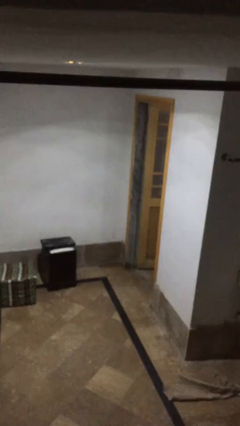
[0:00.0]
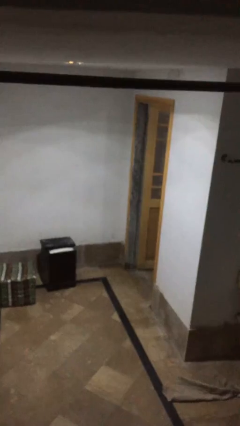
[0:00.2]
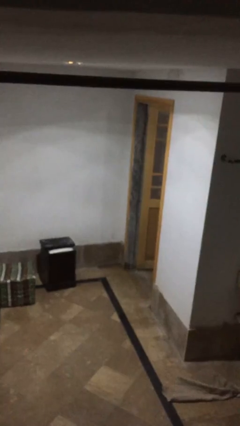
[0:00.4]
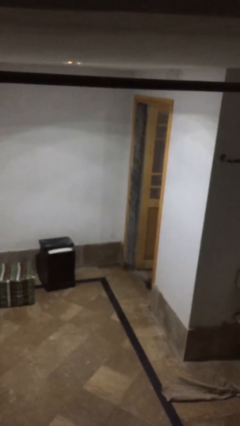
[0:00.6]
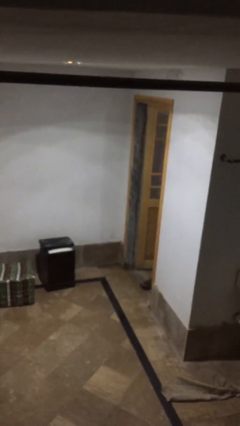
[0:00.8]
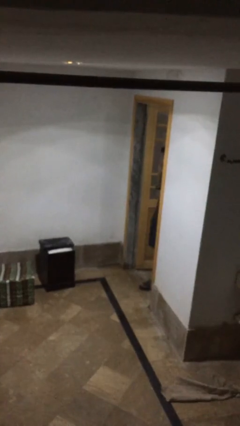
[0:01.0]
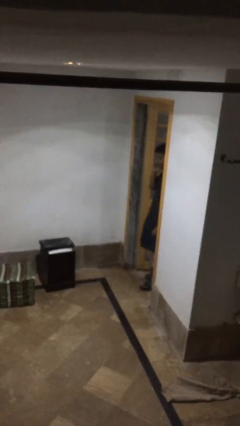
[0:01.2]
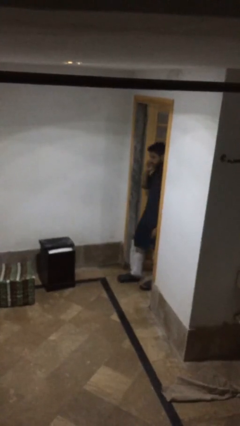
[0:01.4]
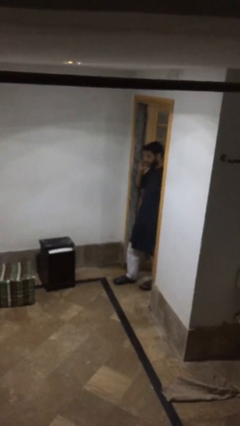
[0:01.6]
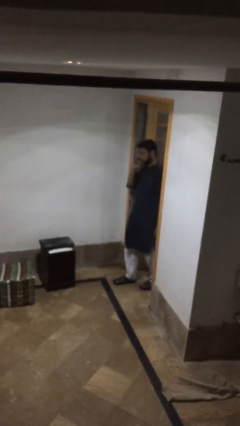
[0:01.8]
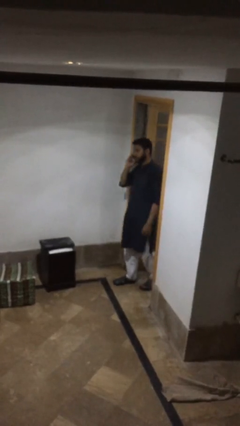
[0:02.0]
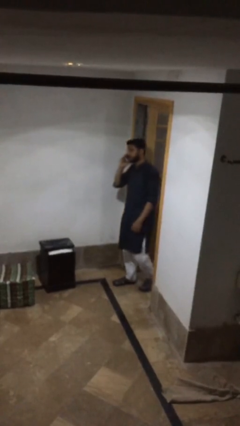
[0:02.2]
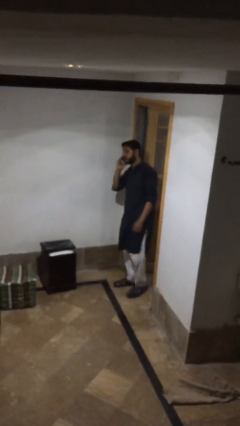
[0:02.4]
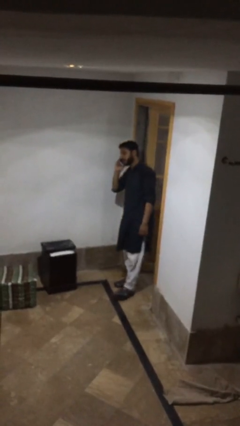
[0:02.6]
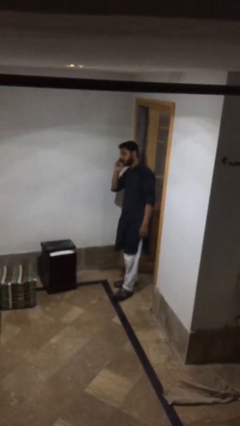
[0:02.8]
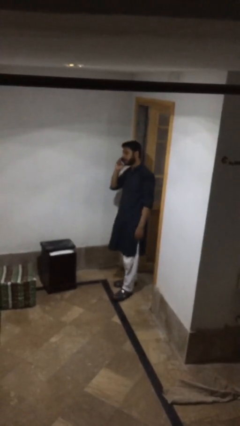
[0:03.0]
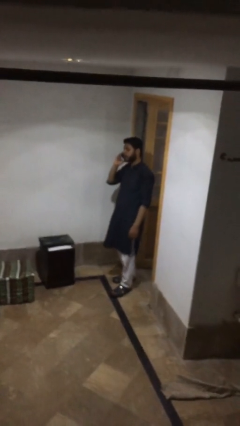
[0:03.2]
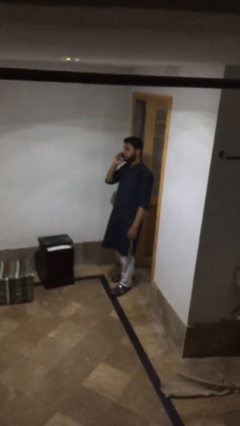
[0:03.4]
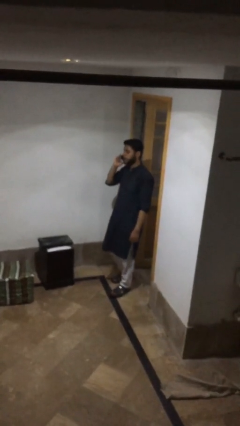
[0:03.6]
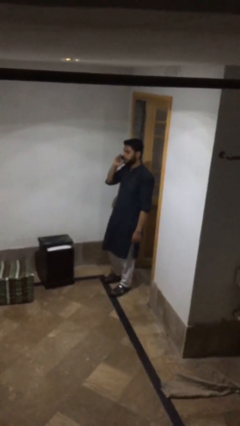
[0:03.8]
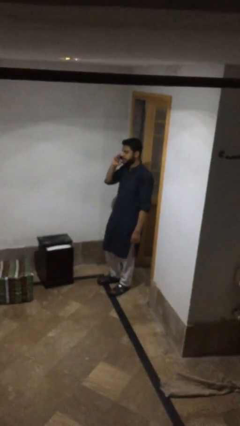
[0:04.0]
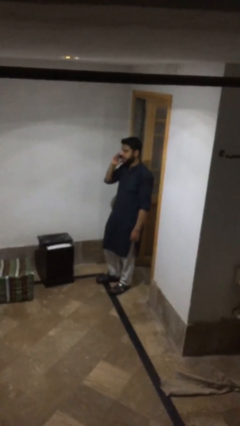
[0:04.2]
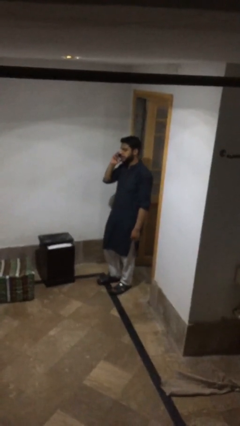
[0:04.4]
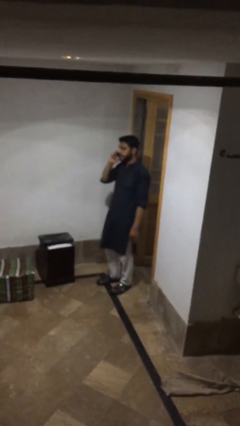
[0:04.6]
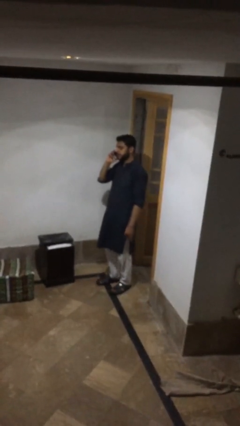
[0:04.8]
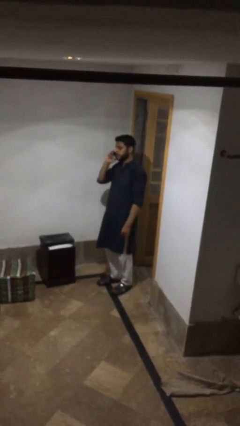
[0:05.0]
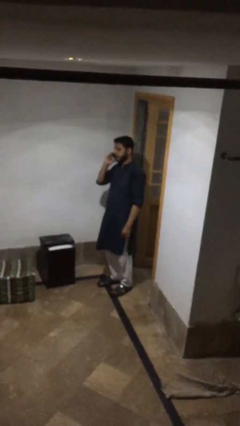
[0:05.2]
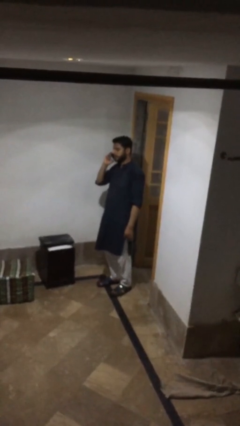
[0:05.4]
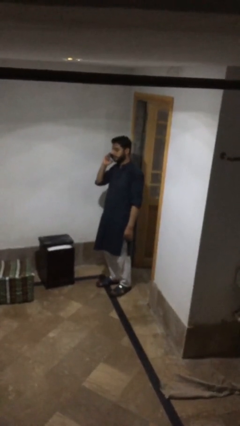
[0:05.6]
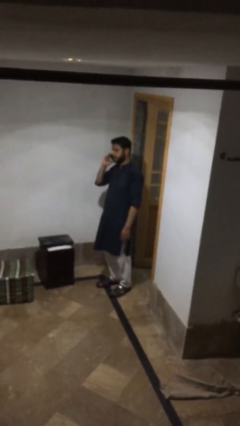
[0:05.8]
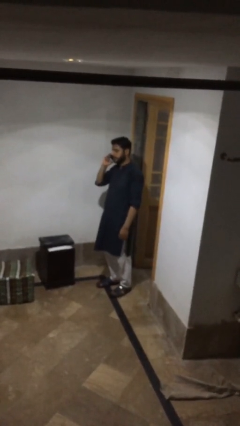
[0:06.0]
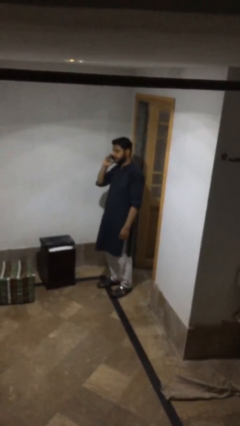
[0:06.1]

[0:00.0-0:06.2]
person enters scene through structure

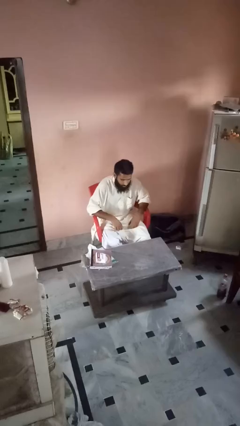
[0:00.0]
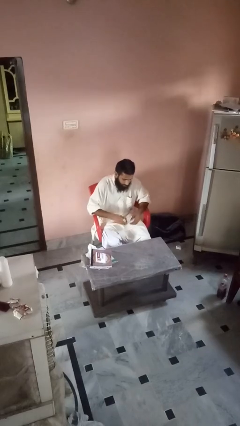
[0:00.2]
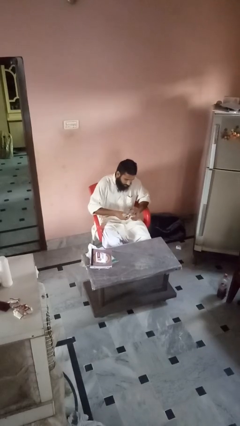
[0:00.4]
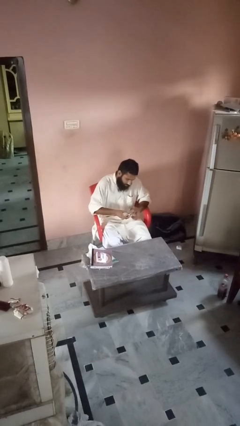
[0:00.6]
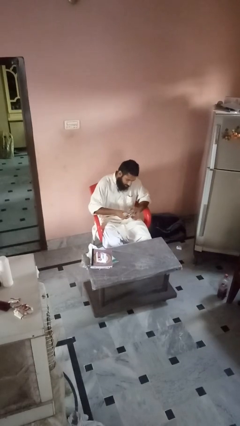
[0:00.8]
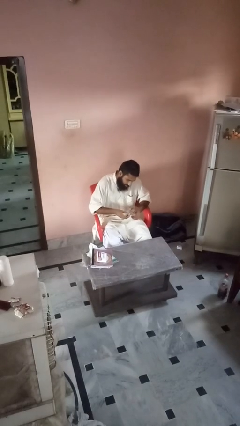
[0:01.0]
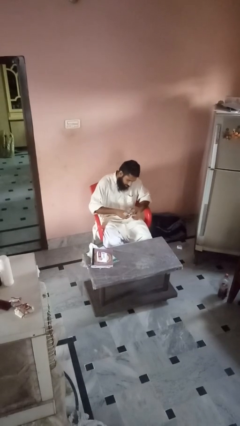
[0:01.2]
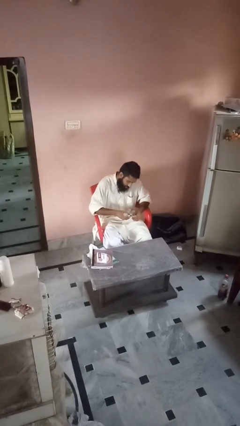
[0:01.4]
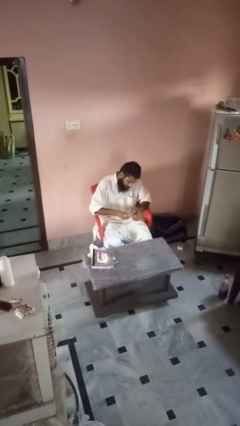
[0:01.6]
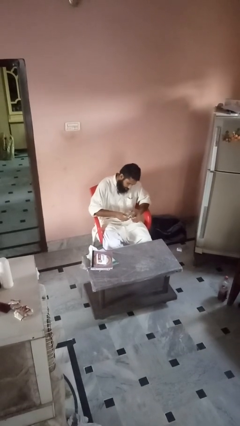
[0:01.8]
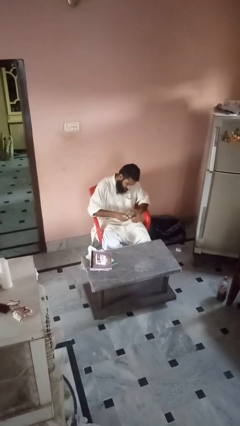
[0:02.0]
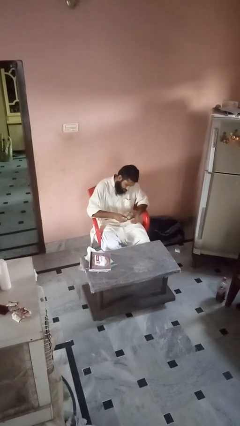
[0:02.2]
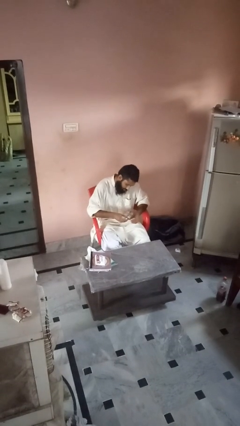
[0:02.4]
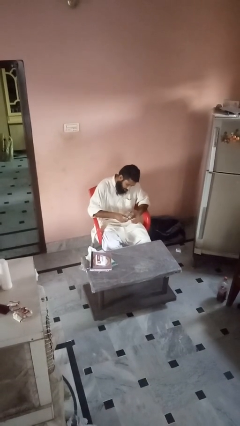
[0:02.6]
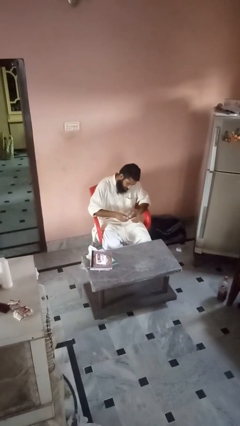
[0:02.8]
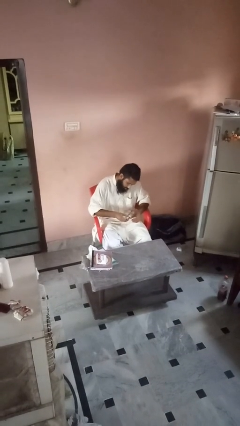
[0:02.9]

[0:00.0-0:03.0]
person clips fingernails

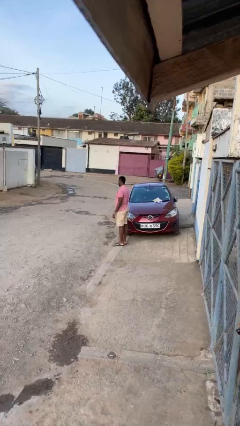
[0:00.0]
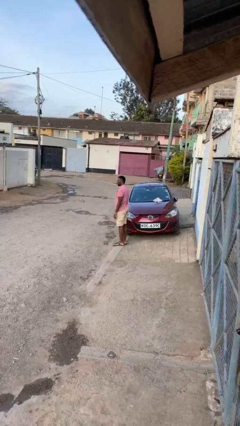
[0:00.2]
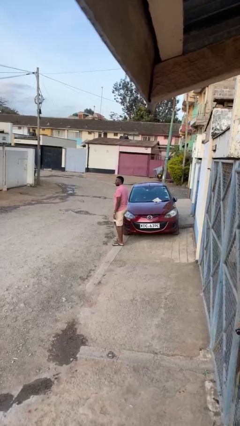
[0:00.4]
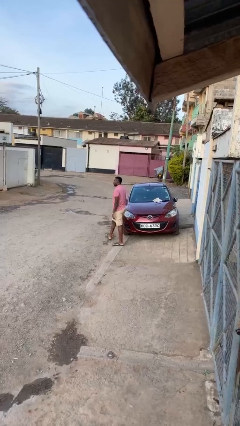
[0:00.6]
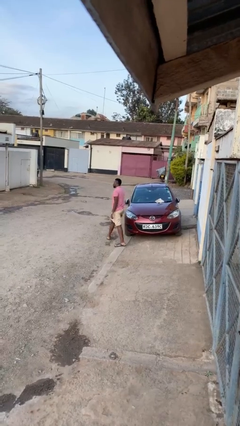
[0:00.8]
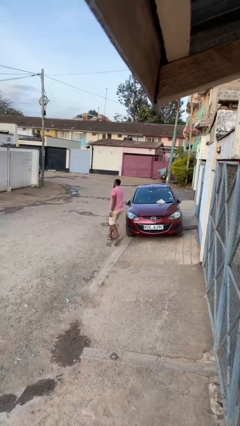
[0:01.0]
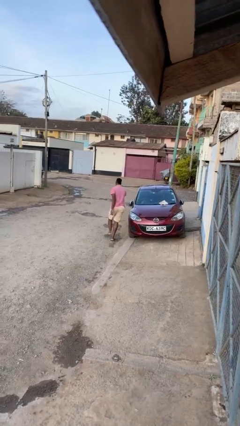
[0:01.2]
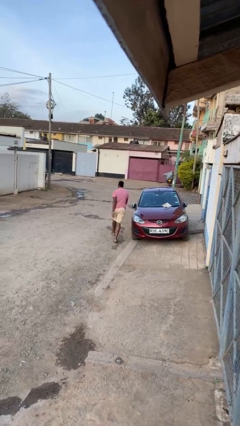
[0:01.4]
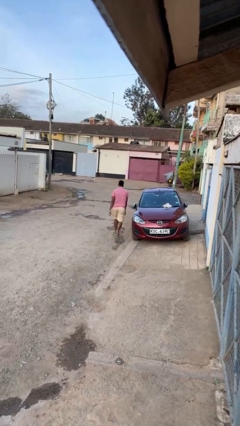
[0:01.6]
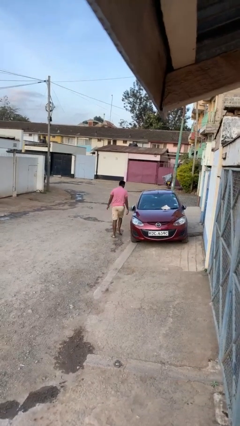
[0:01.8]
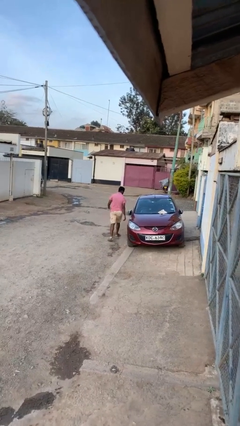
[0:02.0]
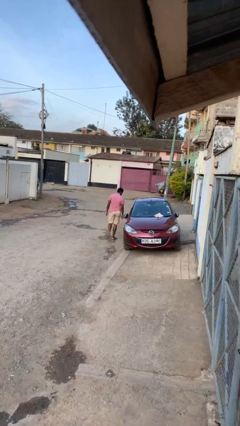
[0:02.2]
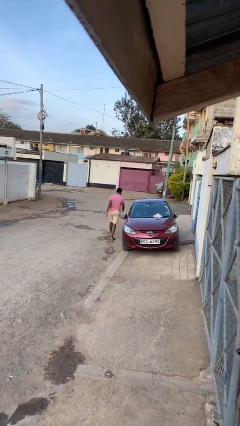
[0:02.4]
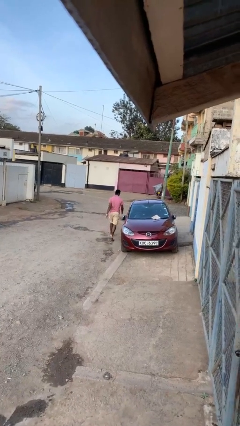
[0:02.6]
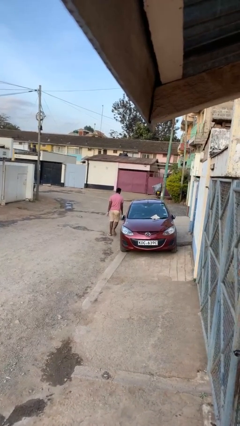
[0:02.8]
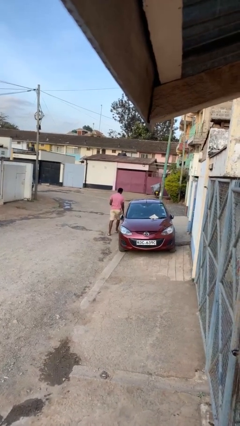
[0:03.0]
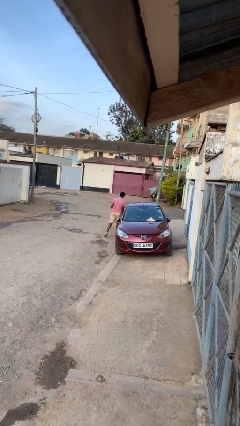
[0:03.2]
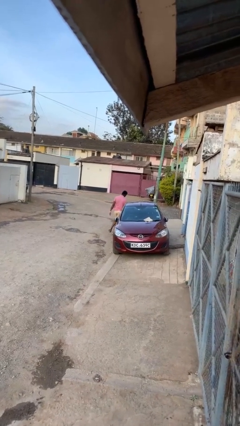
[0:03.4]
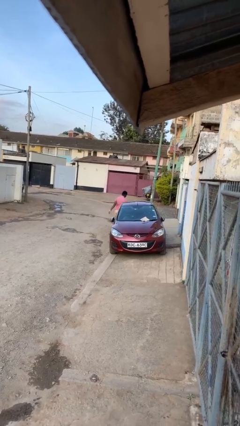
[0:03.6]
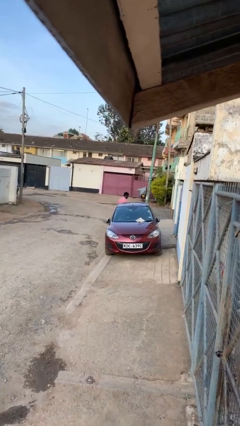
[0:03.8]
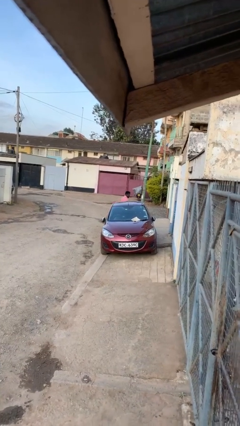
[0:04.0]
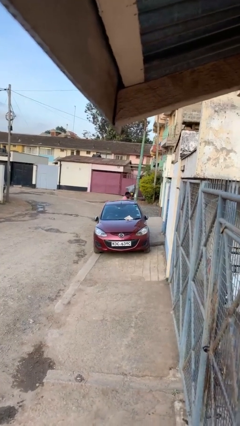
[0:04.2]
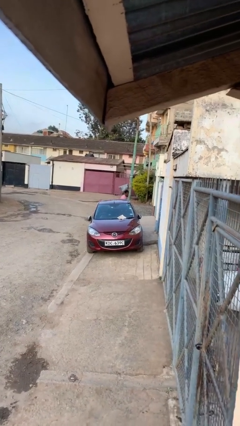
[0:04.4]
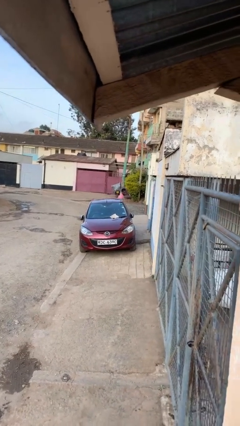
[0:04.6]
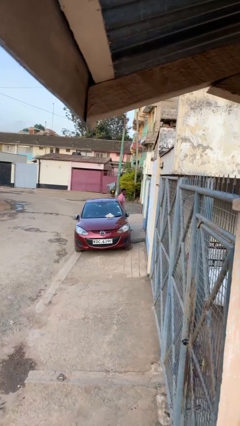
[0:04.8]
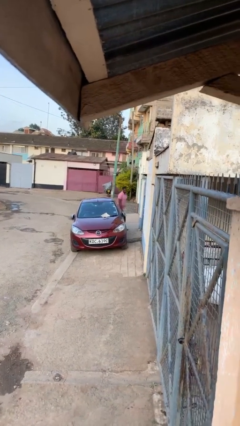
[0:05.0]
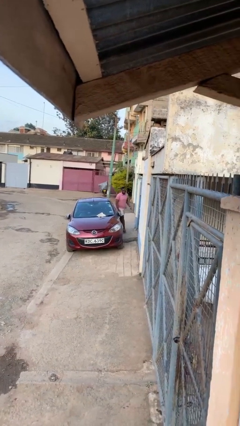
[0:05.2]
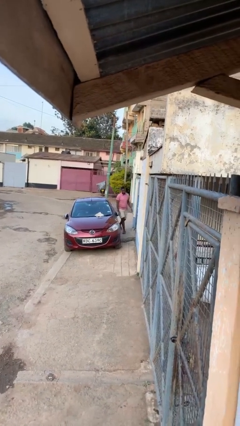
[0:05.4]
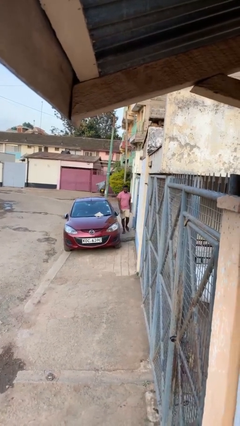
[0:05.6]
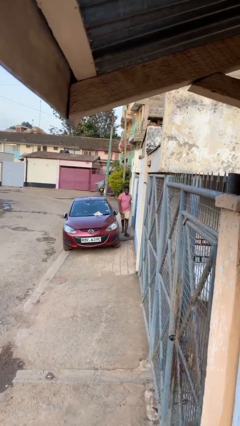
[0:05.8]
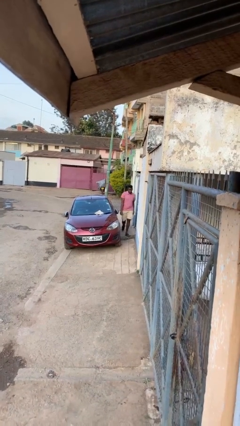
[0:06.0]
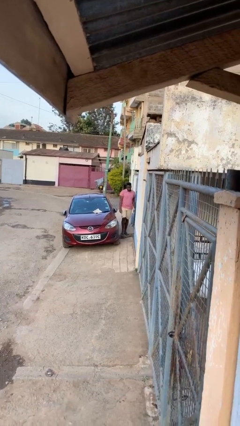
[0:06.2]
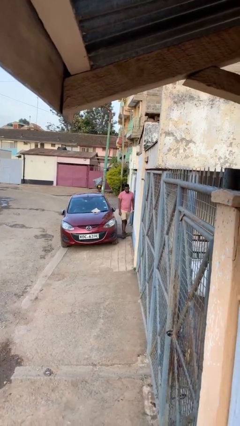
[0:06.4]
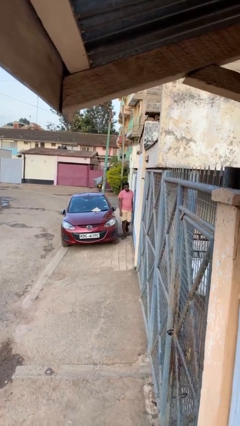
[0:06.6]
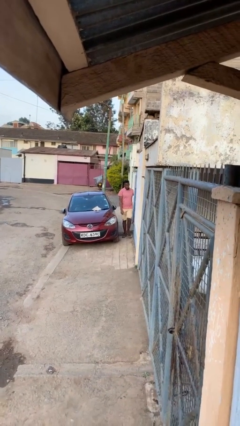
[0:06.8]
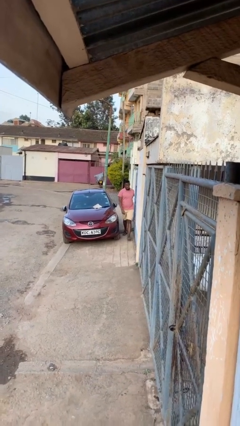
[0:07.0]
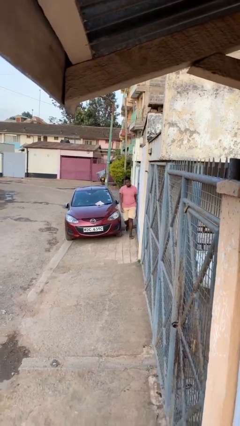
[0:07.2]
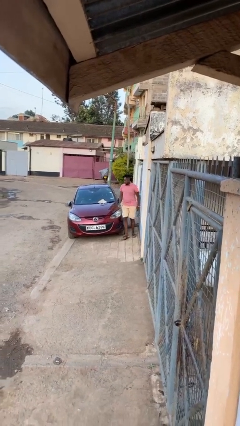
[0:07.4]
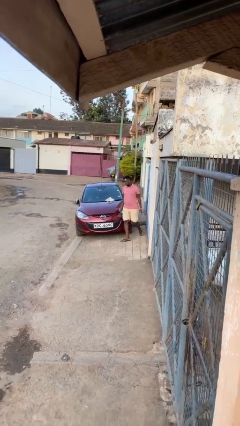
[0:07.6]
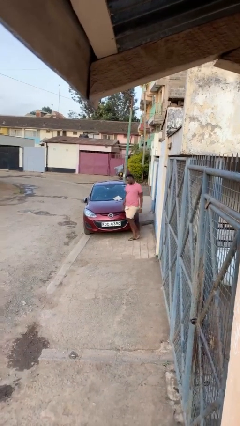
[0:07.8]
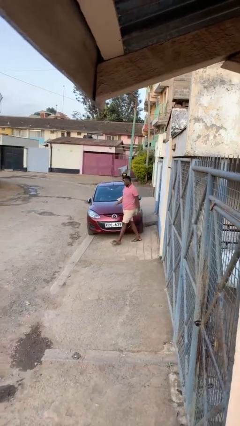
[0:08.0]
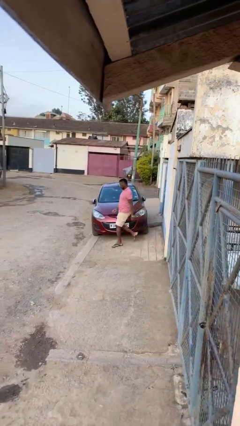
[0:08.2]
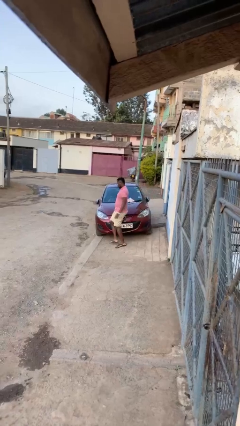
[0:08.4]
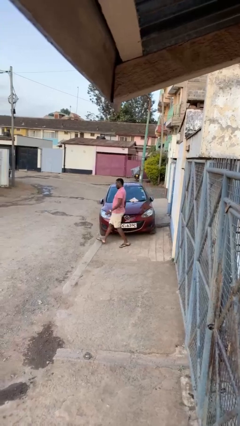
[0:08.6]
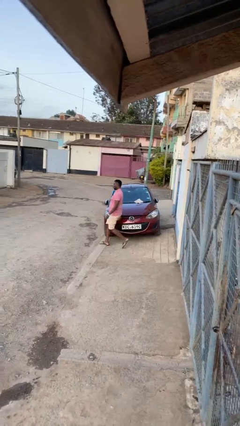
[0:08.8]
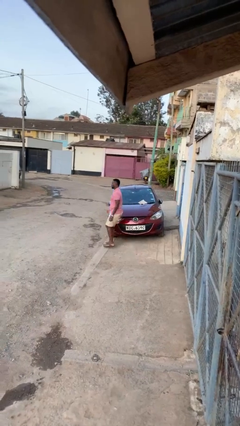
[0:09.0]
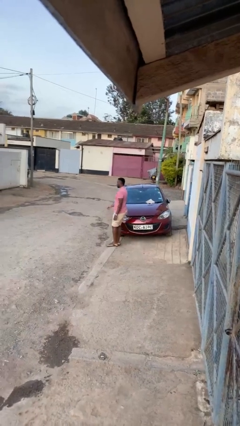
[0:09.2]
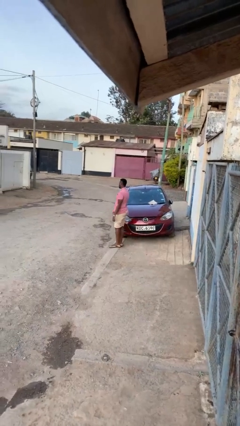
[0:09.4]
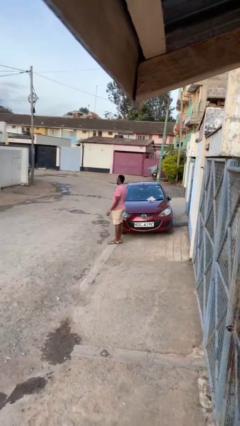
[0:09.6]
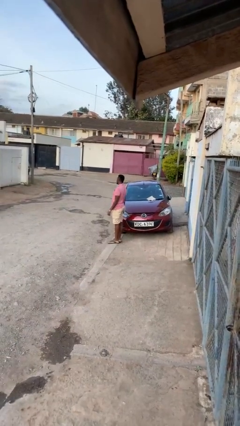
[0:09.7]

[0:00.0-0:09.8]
person walks around car
